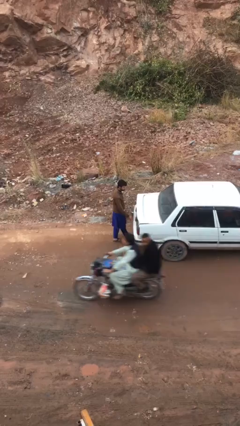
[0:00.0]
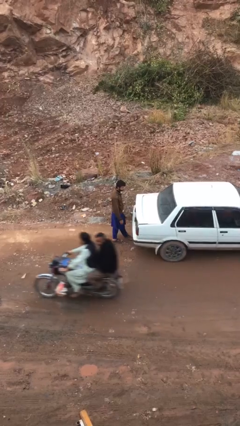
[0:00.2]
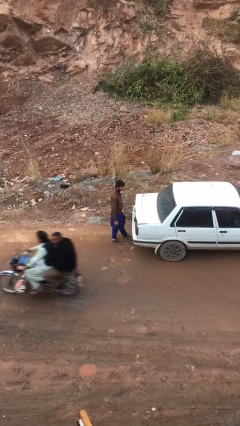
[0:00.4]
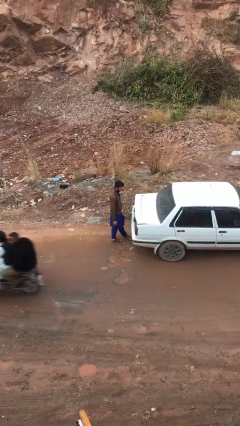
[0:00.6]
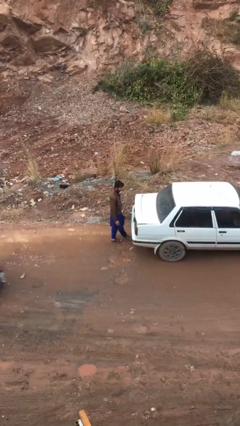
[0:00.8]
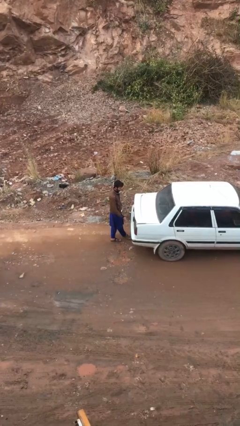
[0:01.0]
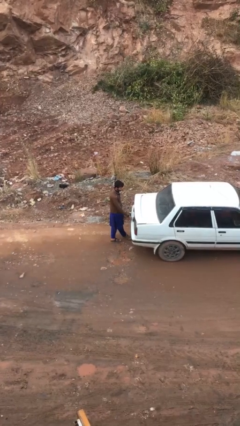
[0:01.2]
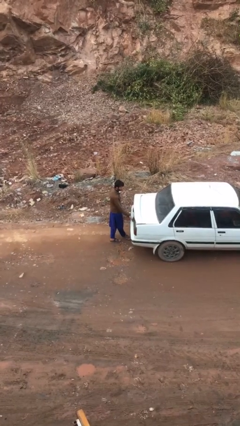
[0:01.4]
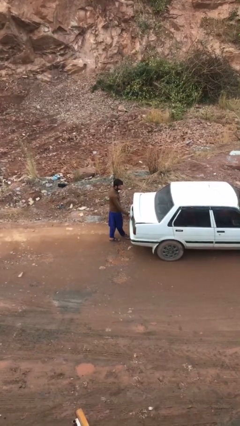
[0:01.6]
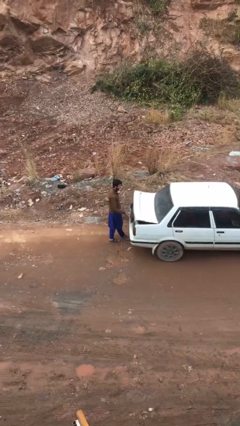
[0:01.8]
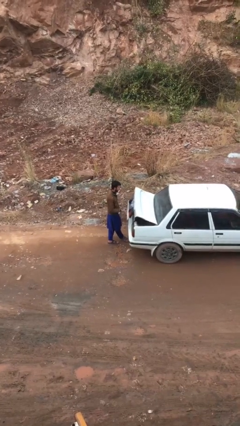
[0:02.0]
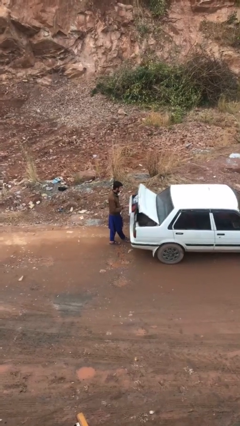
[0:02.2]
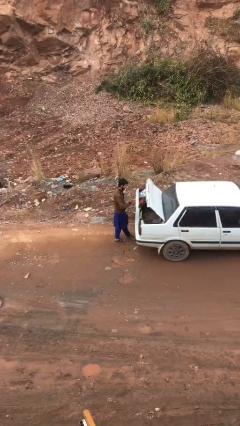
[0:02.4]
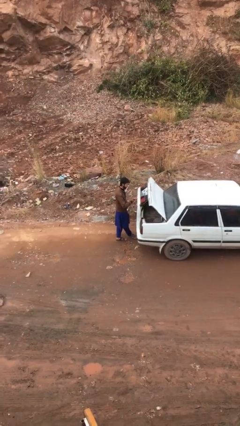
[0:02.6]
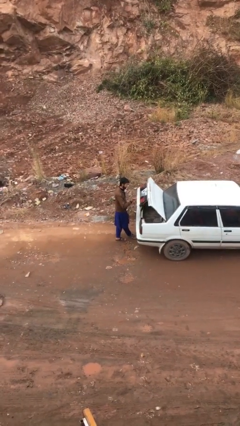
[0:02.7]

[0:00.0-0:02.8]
person opens car trunk

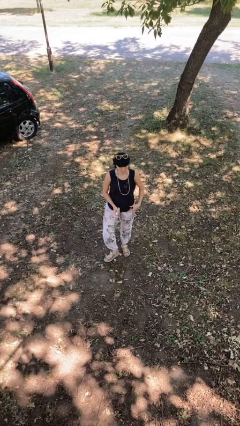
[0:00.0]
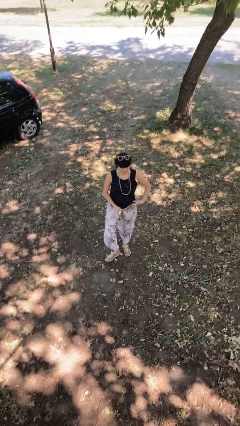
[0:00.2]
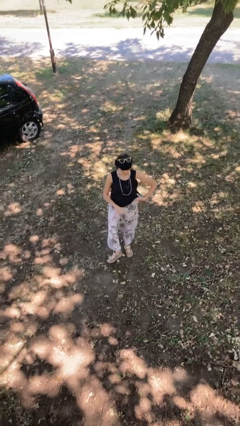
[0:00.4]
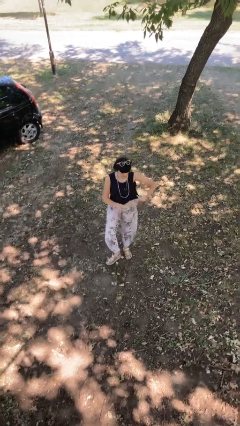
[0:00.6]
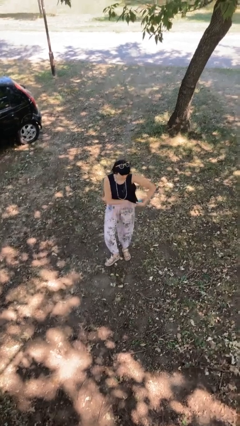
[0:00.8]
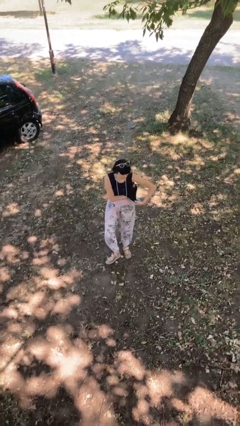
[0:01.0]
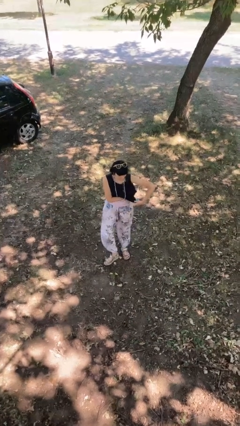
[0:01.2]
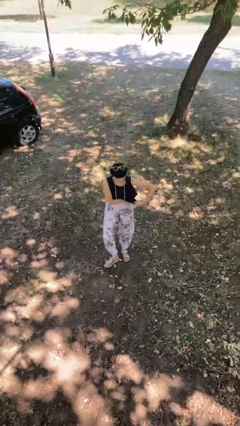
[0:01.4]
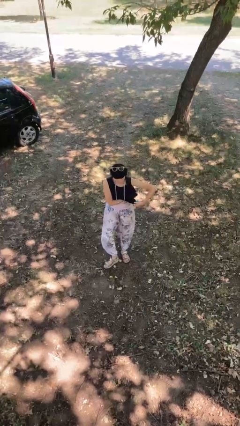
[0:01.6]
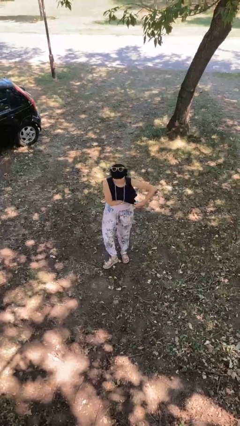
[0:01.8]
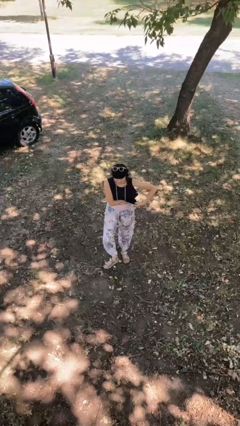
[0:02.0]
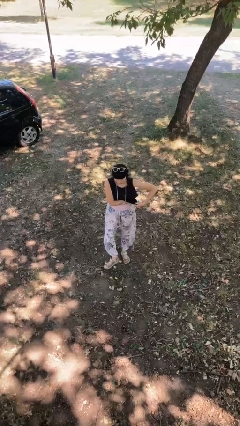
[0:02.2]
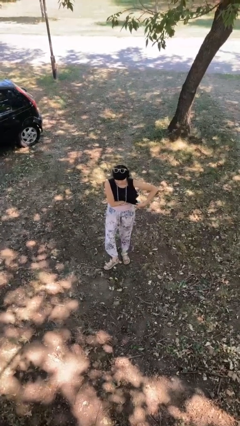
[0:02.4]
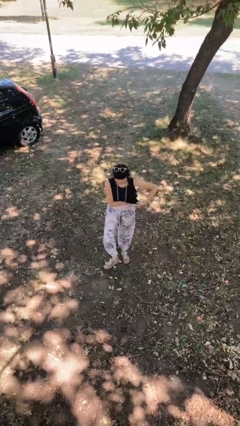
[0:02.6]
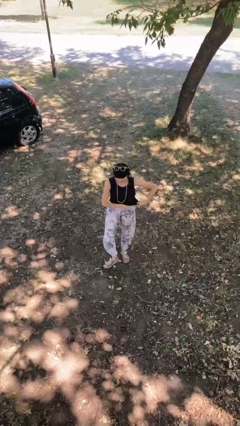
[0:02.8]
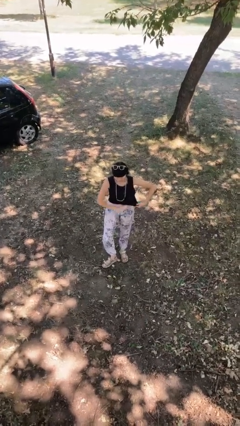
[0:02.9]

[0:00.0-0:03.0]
person applies deodorant

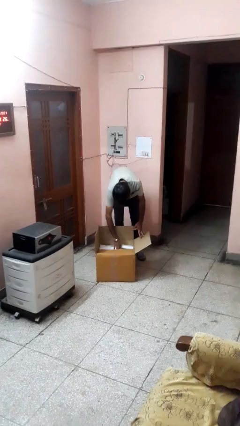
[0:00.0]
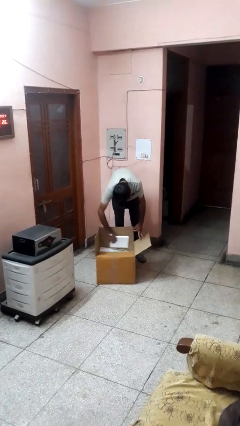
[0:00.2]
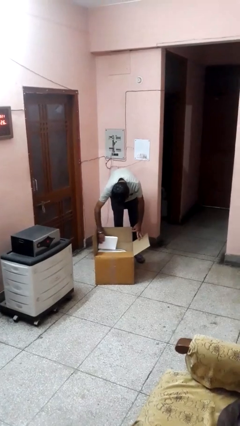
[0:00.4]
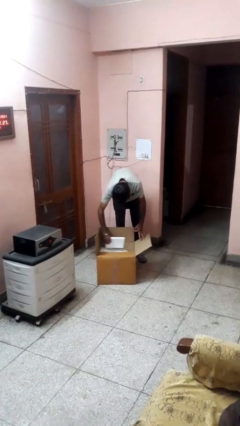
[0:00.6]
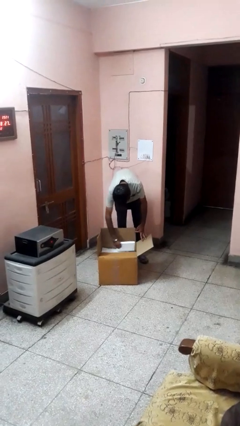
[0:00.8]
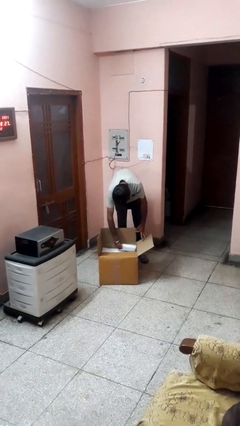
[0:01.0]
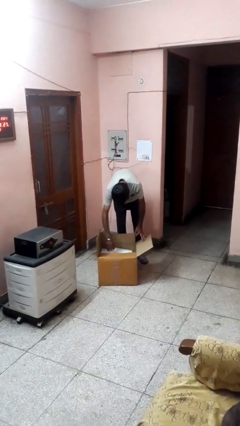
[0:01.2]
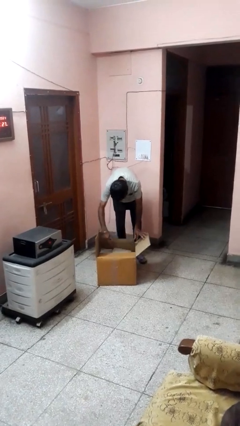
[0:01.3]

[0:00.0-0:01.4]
person searches in box

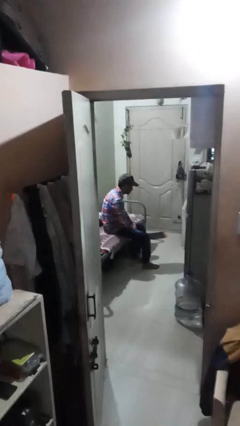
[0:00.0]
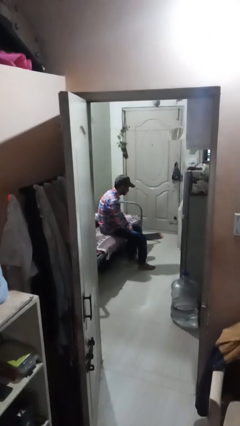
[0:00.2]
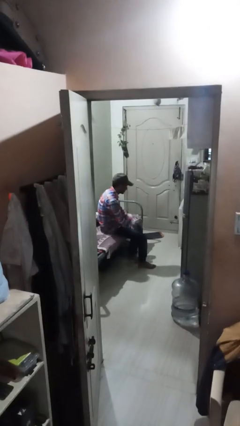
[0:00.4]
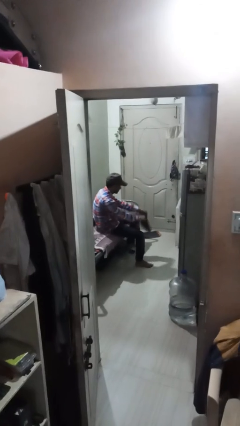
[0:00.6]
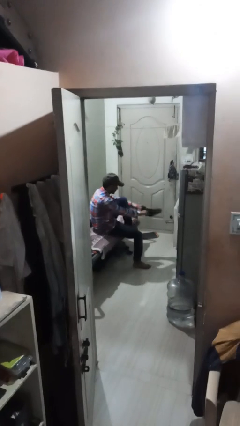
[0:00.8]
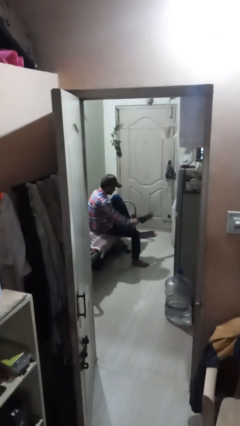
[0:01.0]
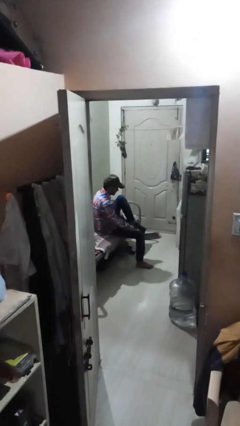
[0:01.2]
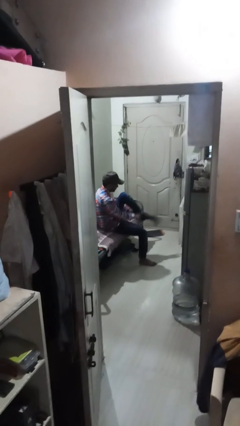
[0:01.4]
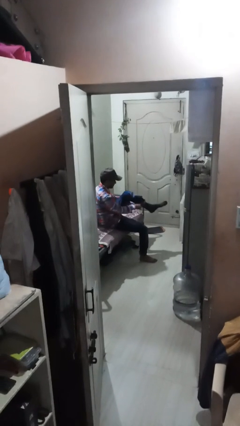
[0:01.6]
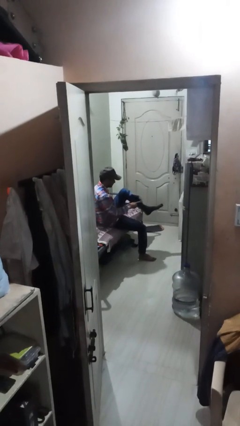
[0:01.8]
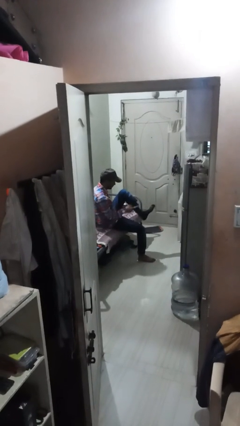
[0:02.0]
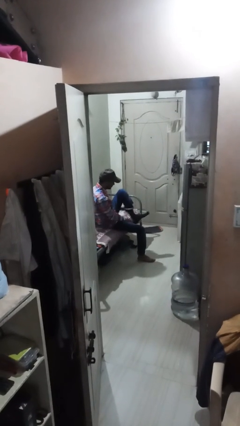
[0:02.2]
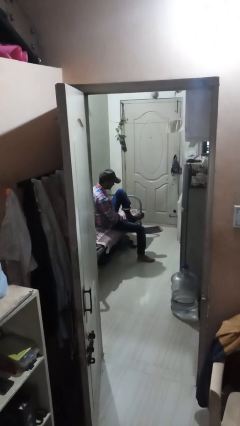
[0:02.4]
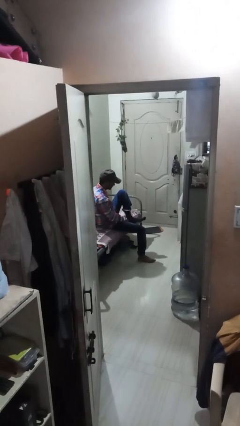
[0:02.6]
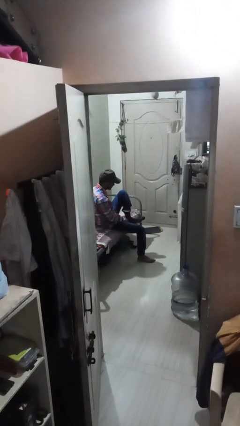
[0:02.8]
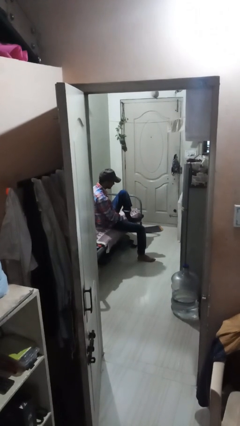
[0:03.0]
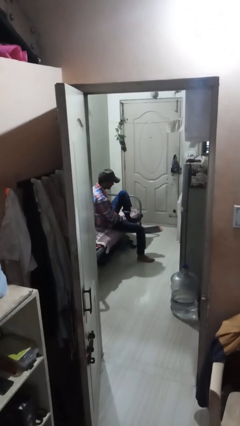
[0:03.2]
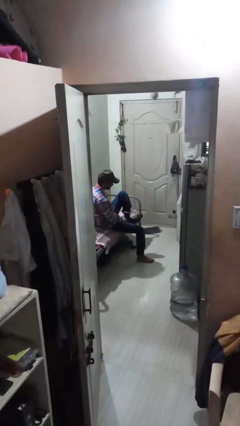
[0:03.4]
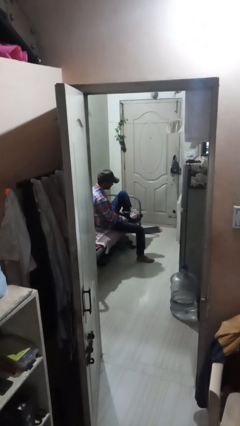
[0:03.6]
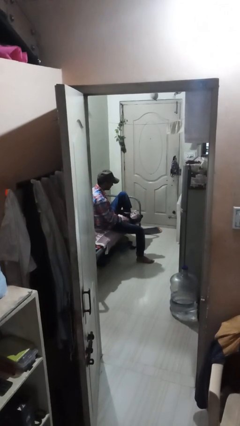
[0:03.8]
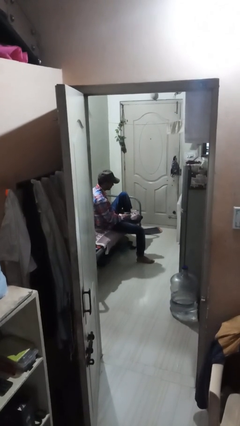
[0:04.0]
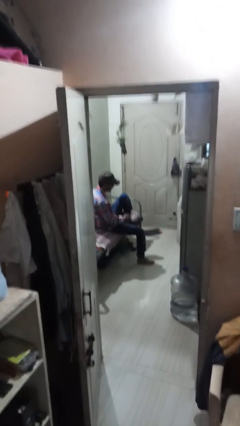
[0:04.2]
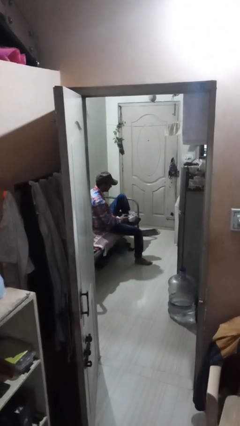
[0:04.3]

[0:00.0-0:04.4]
person puts on socks

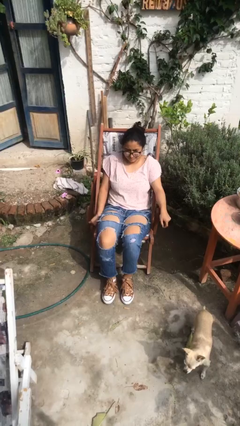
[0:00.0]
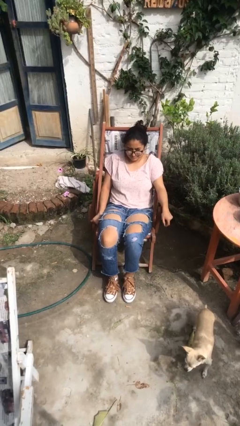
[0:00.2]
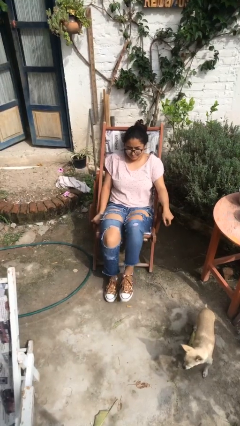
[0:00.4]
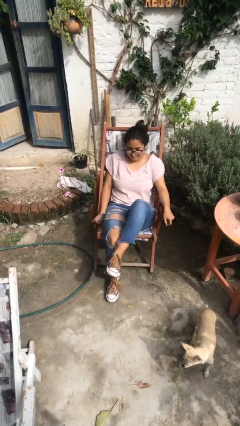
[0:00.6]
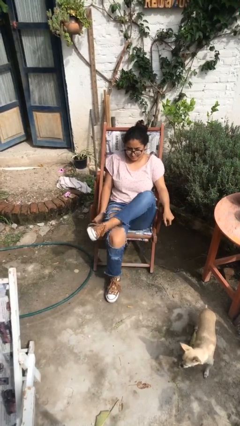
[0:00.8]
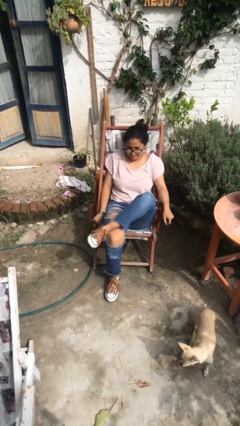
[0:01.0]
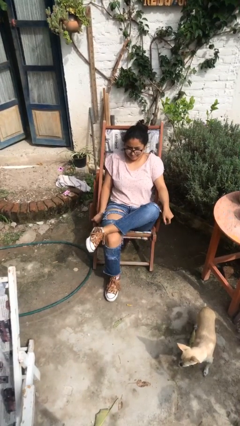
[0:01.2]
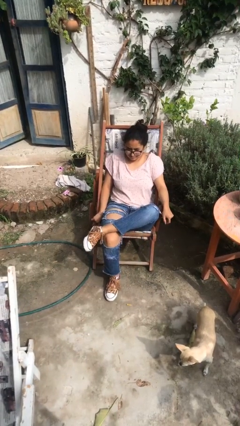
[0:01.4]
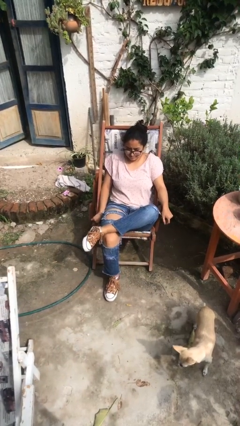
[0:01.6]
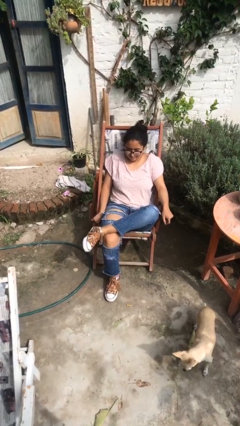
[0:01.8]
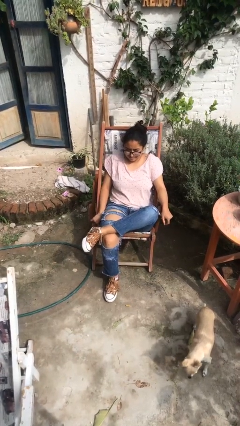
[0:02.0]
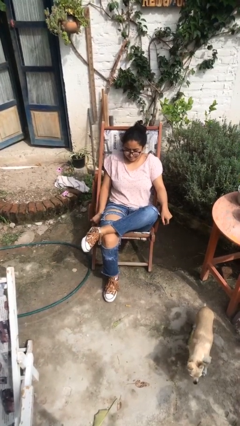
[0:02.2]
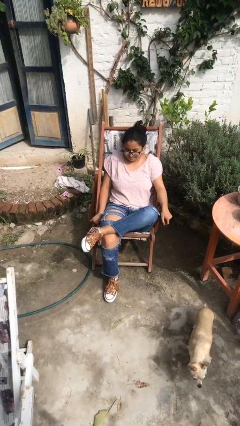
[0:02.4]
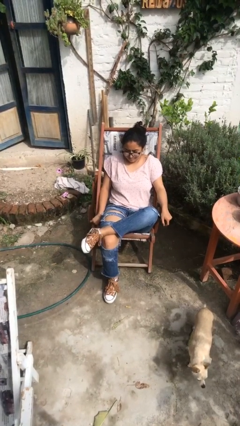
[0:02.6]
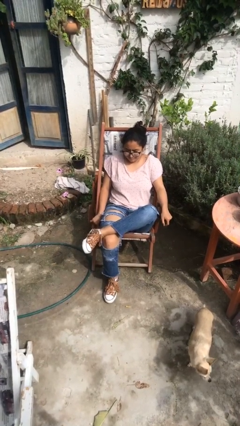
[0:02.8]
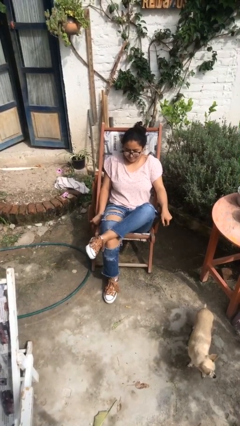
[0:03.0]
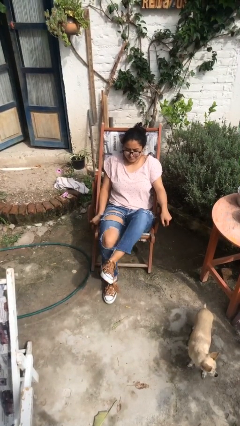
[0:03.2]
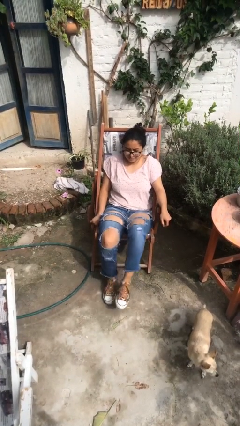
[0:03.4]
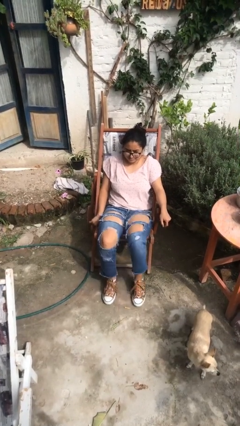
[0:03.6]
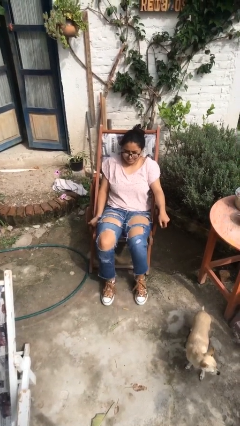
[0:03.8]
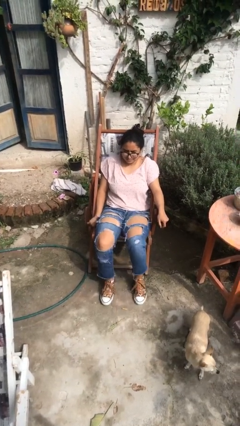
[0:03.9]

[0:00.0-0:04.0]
person crosses legs

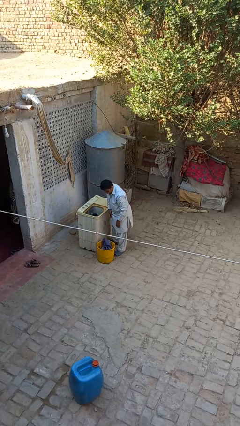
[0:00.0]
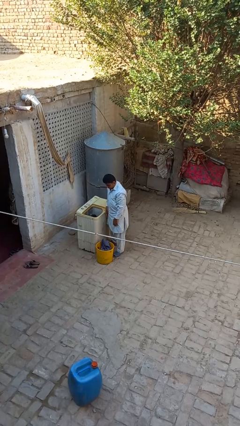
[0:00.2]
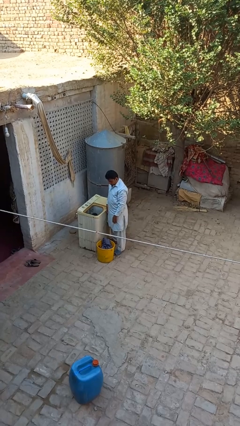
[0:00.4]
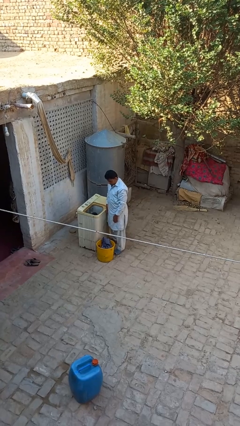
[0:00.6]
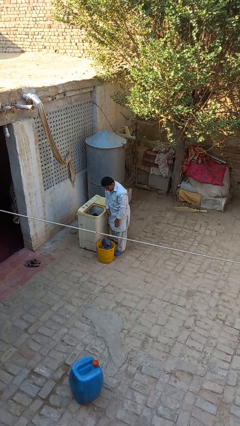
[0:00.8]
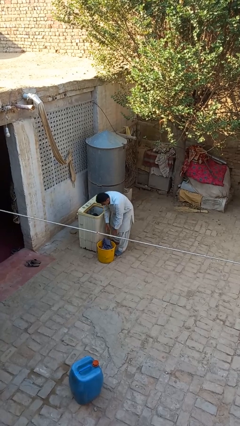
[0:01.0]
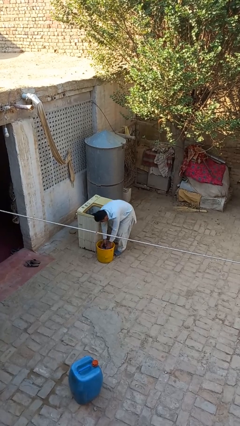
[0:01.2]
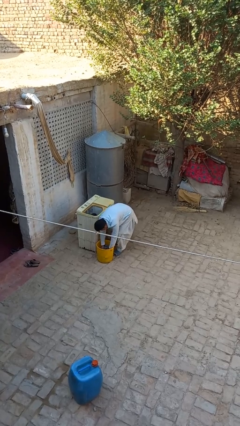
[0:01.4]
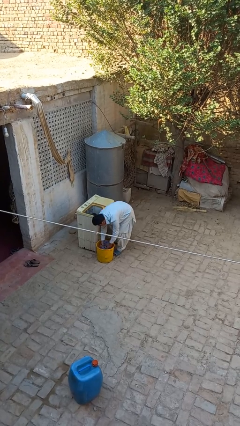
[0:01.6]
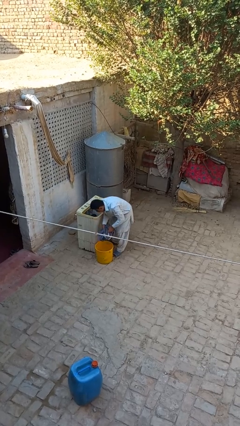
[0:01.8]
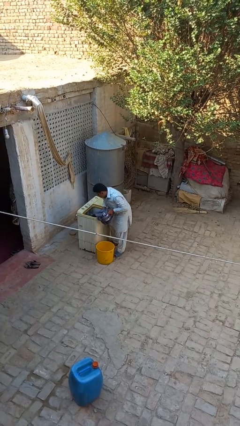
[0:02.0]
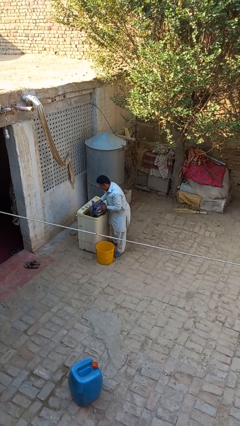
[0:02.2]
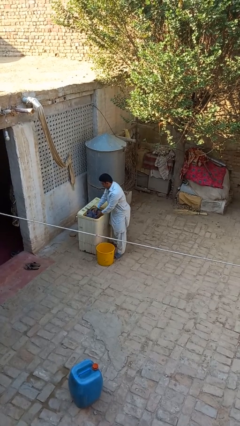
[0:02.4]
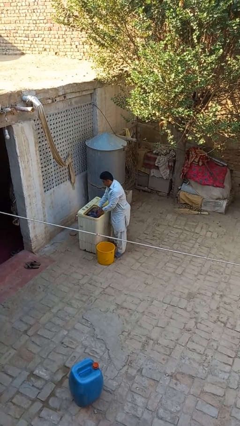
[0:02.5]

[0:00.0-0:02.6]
person loads clotheswasher
